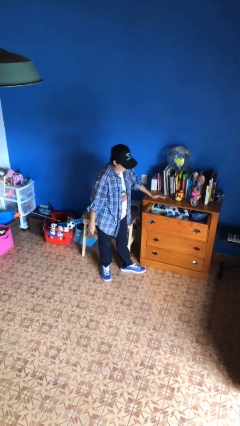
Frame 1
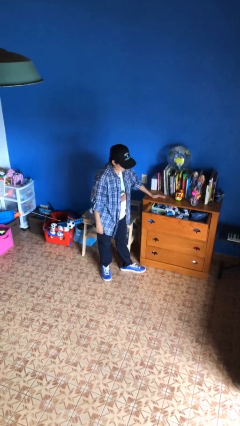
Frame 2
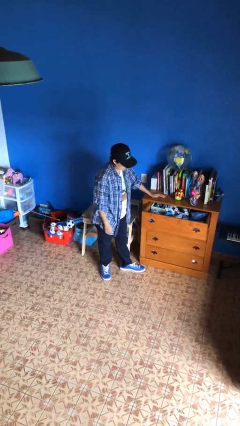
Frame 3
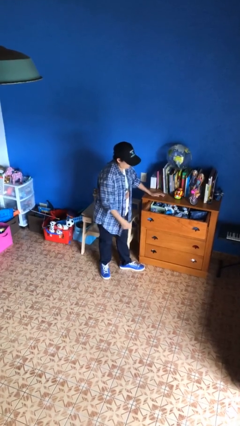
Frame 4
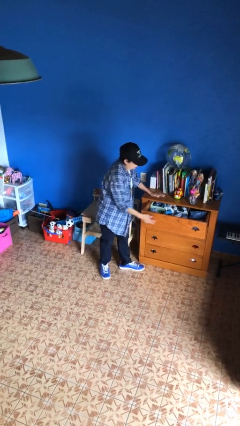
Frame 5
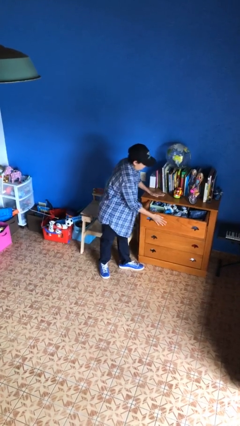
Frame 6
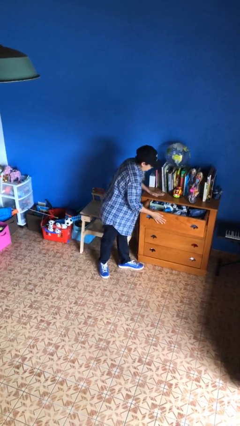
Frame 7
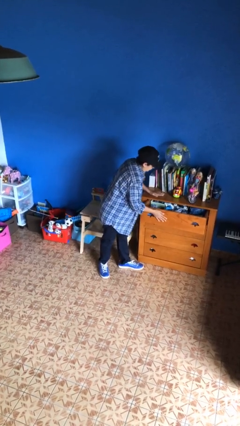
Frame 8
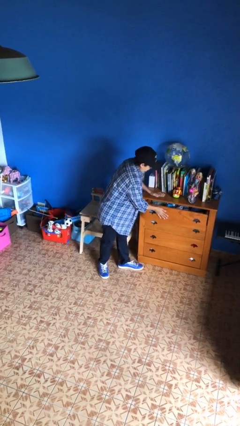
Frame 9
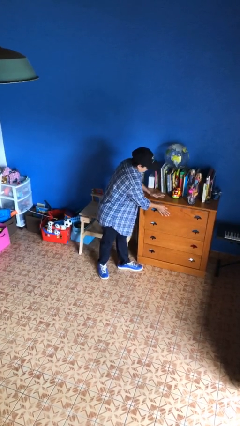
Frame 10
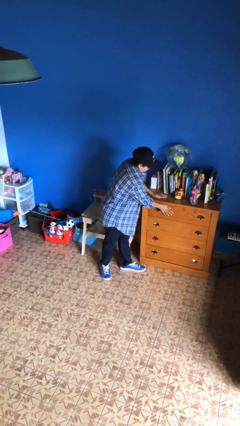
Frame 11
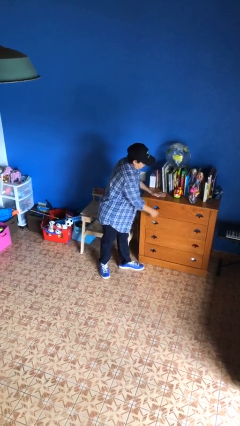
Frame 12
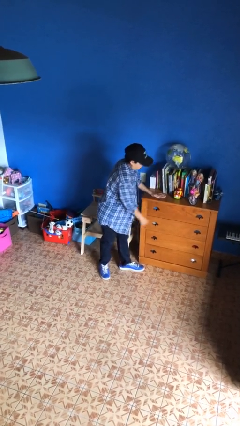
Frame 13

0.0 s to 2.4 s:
person closes dresser drawer

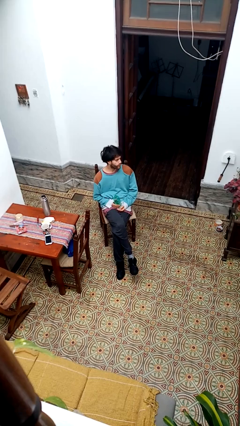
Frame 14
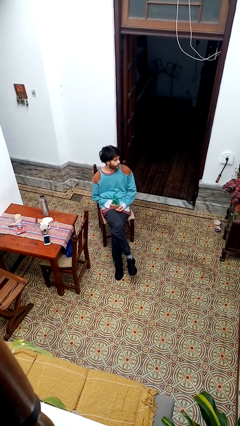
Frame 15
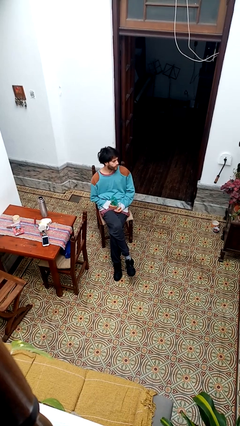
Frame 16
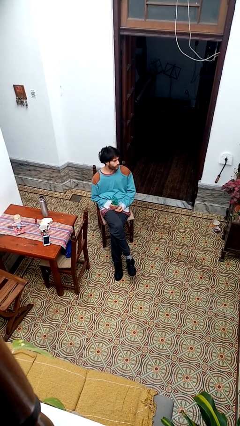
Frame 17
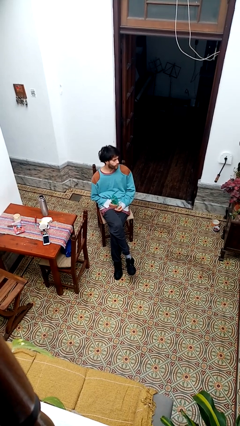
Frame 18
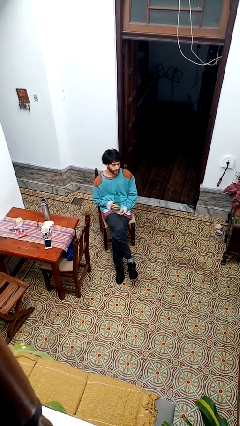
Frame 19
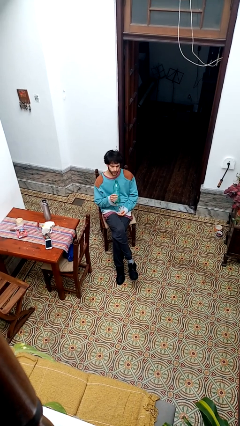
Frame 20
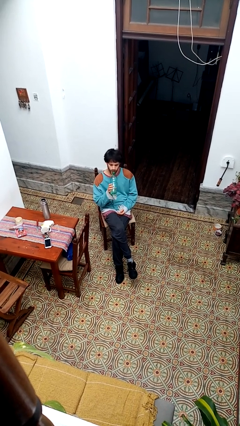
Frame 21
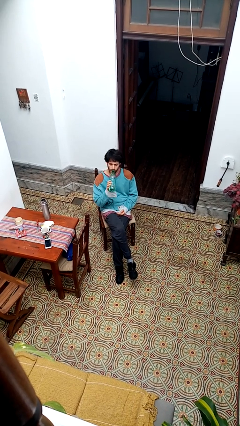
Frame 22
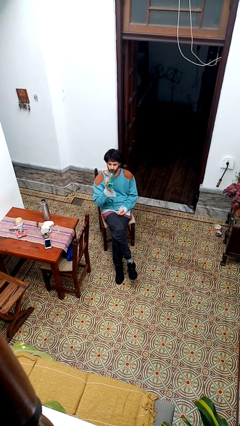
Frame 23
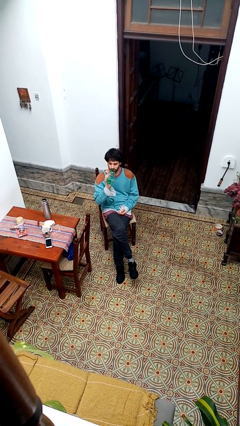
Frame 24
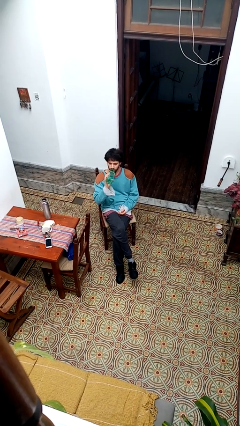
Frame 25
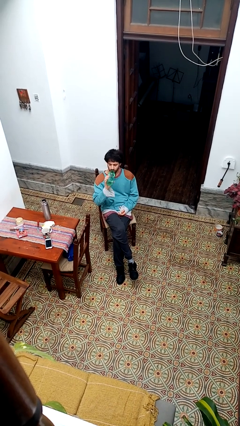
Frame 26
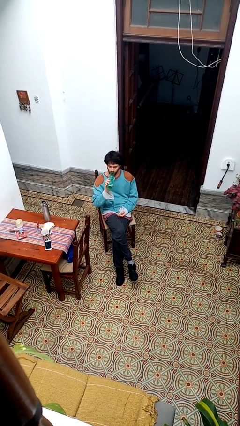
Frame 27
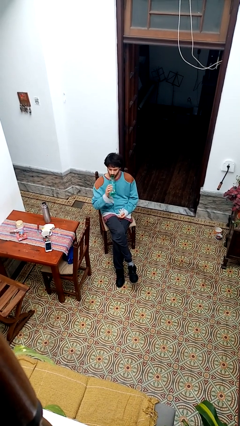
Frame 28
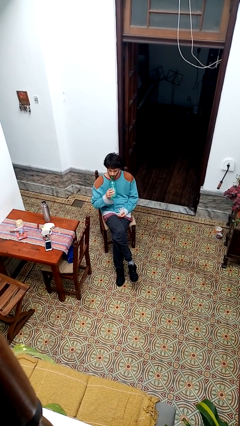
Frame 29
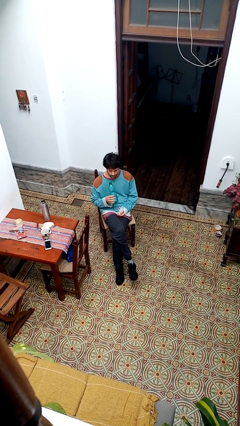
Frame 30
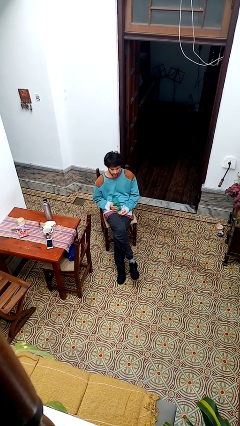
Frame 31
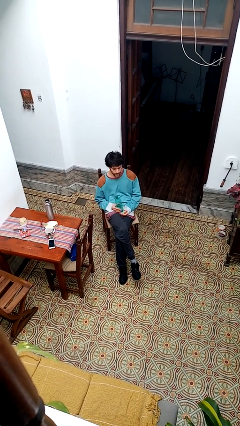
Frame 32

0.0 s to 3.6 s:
person drinks from bottle

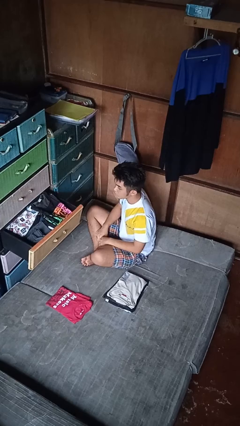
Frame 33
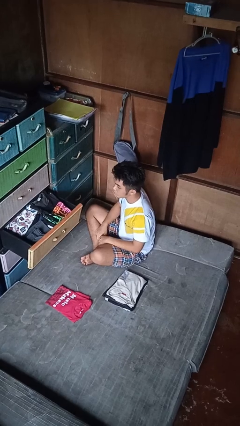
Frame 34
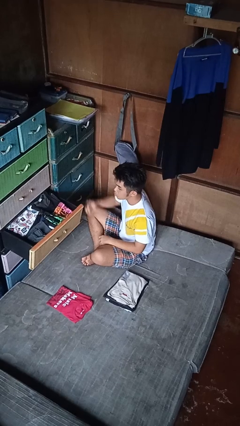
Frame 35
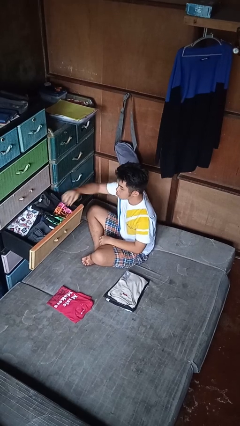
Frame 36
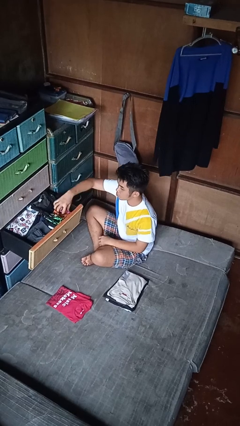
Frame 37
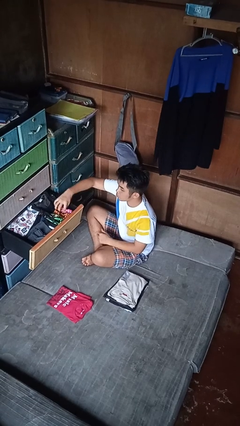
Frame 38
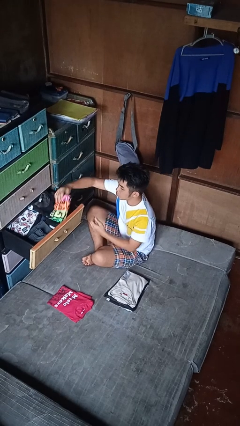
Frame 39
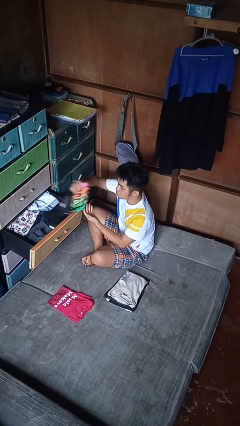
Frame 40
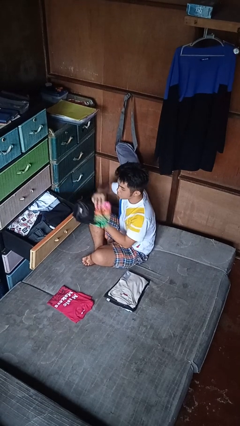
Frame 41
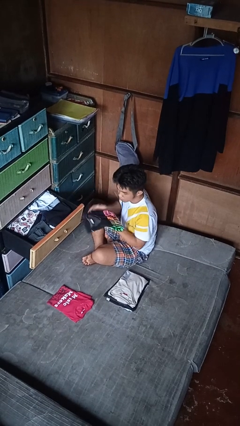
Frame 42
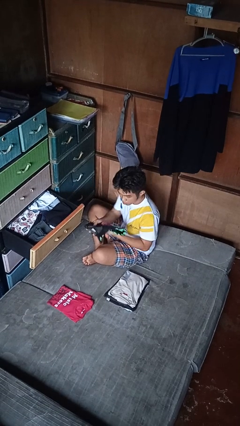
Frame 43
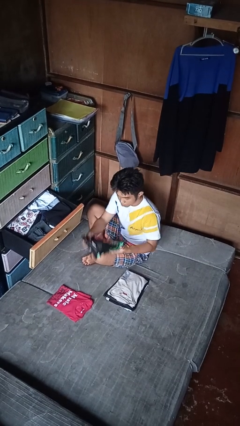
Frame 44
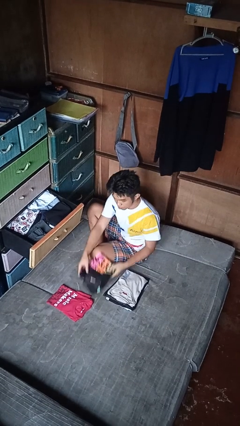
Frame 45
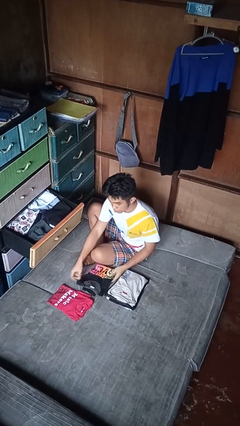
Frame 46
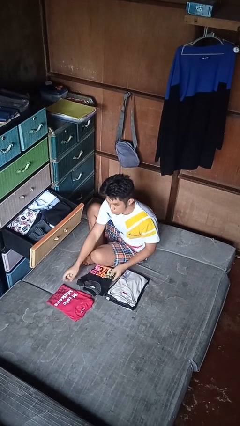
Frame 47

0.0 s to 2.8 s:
person takes clothes from dresser

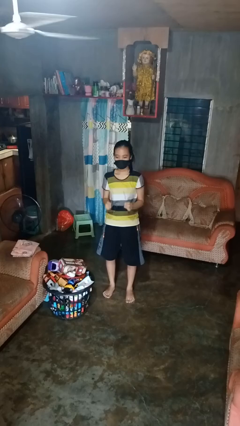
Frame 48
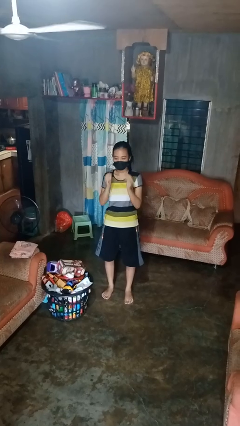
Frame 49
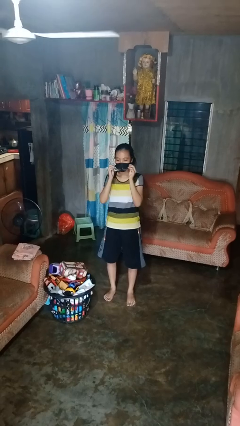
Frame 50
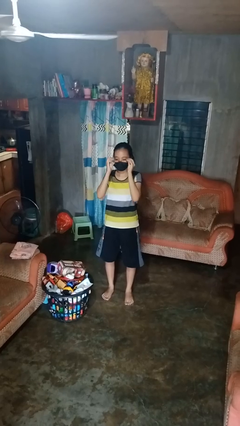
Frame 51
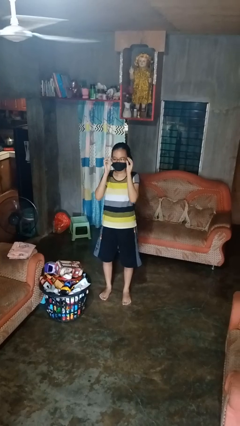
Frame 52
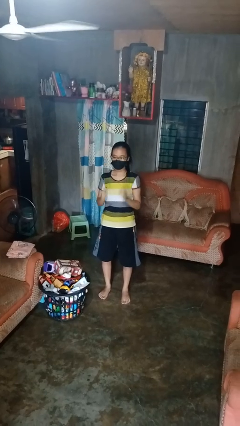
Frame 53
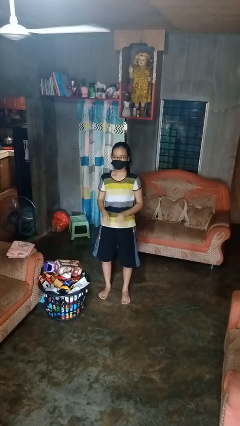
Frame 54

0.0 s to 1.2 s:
person puts on glasses

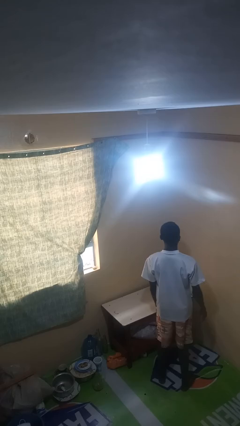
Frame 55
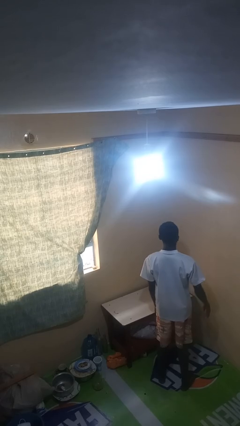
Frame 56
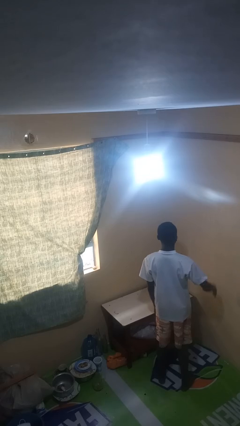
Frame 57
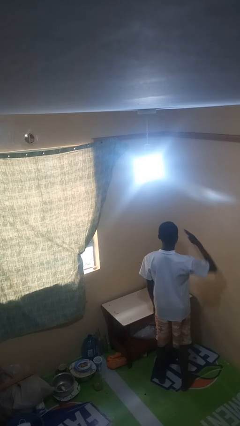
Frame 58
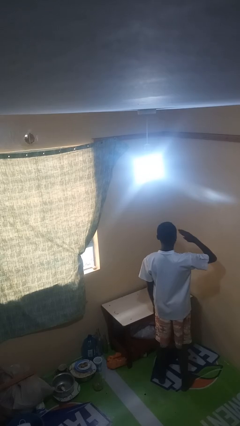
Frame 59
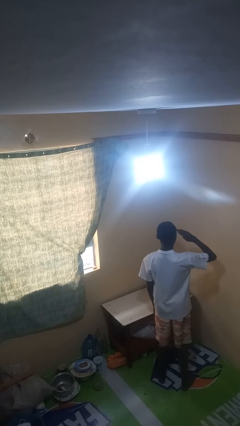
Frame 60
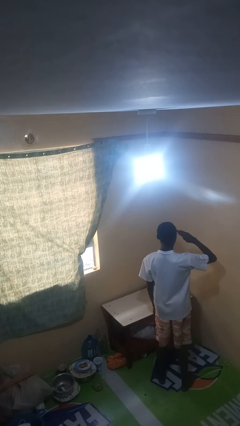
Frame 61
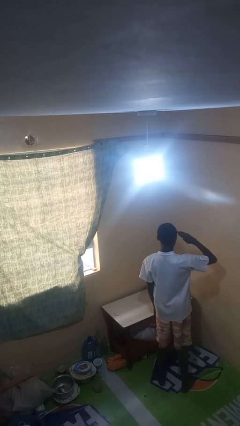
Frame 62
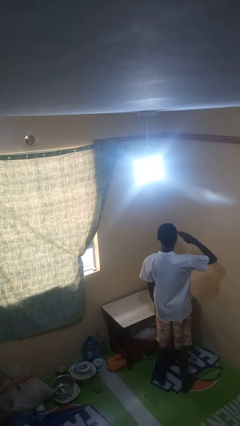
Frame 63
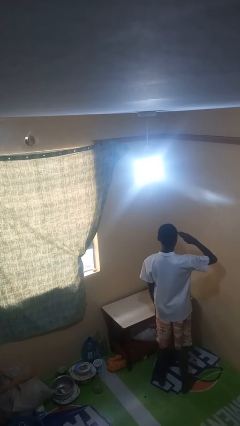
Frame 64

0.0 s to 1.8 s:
person salutes

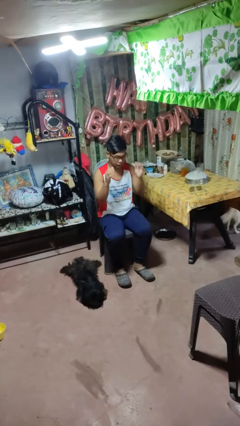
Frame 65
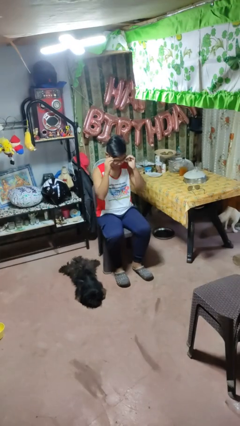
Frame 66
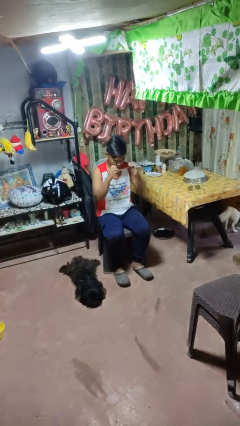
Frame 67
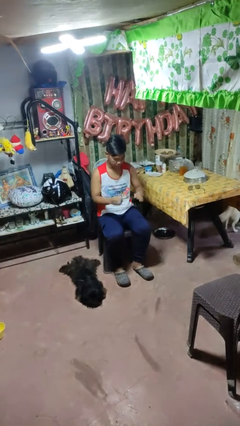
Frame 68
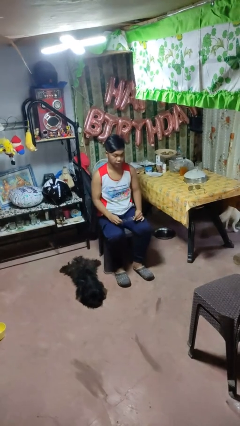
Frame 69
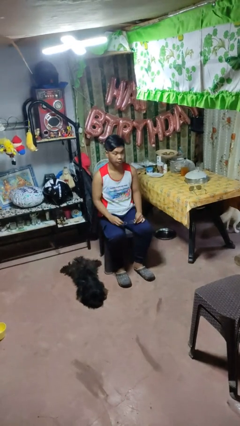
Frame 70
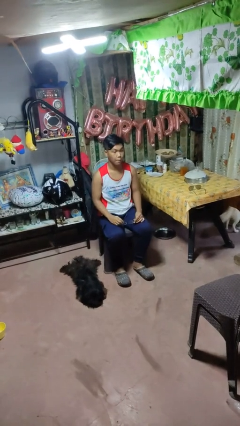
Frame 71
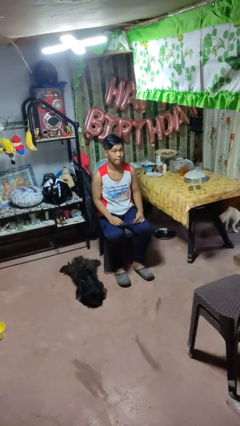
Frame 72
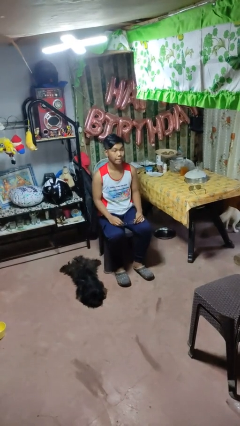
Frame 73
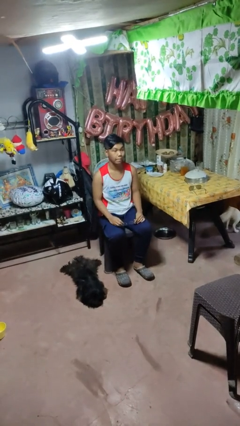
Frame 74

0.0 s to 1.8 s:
person takes off glasses

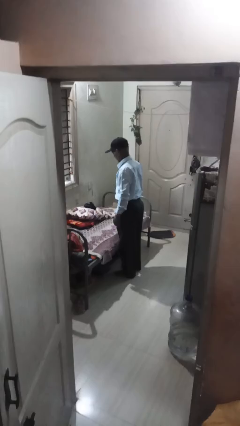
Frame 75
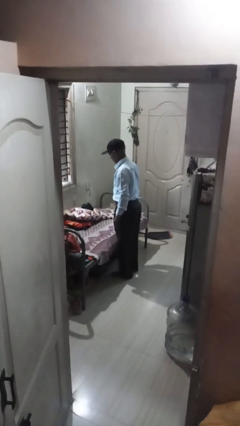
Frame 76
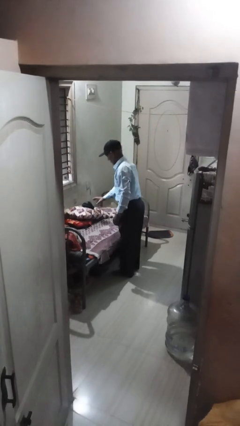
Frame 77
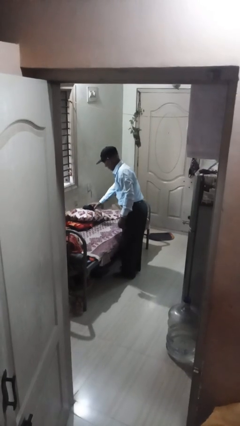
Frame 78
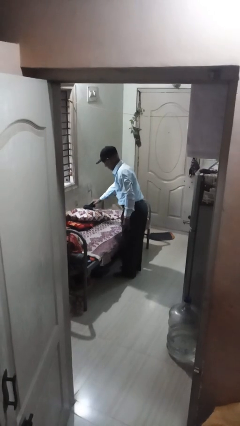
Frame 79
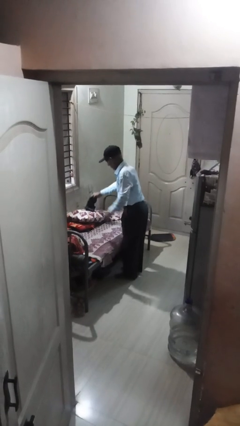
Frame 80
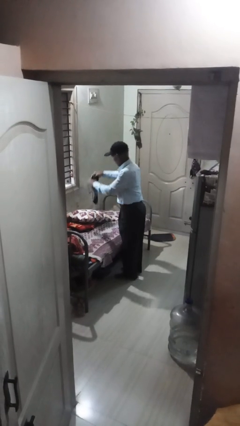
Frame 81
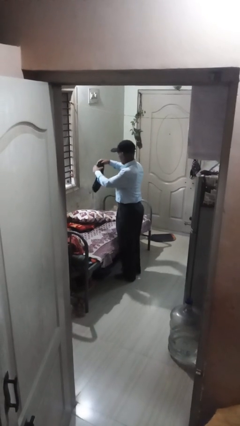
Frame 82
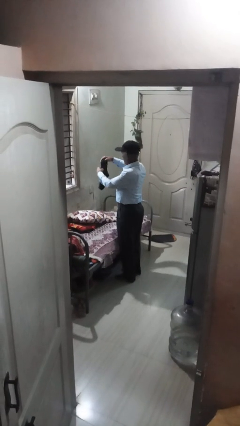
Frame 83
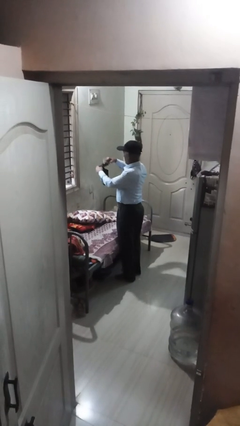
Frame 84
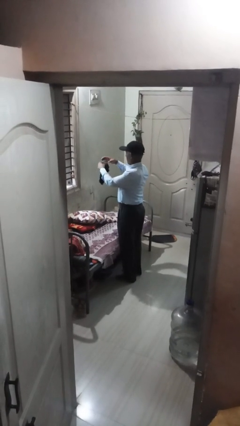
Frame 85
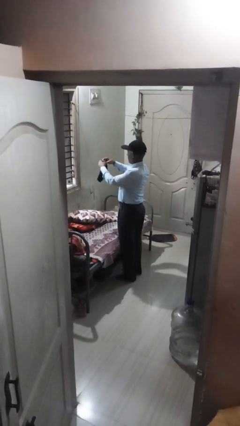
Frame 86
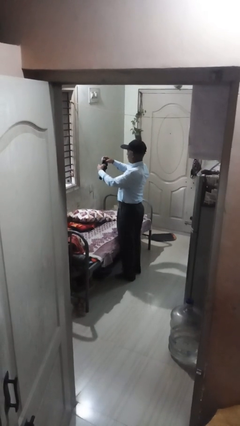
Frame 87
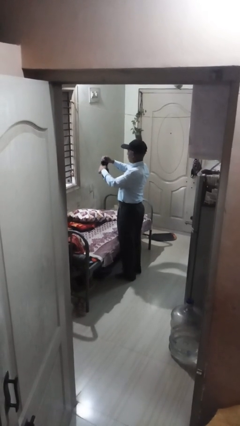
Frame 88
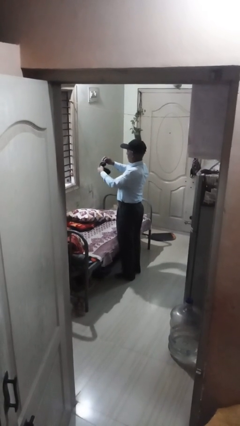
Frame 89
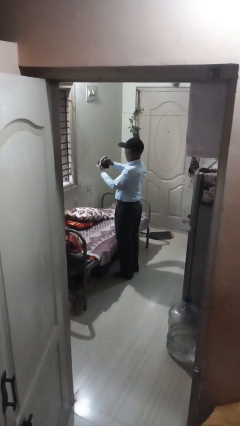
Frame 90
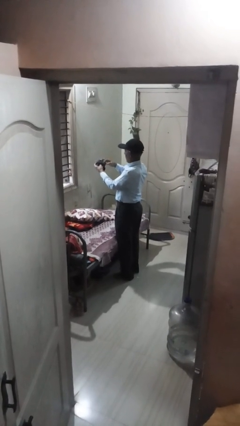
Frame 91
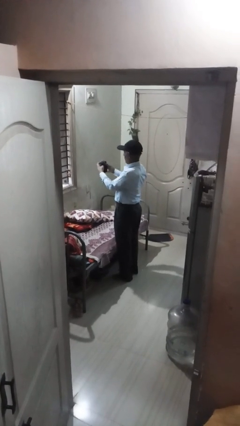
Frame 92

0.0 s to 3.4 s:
person folds socks
